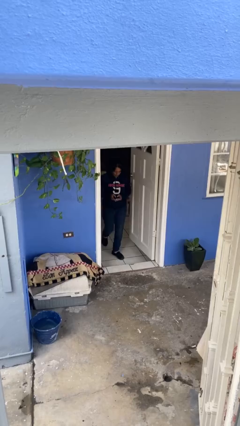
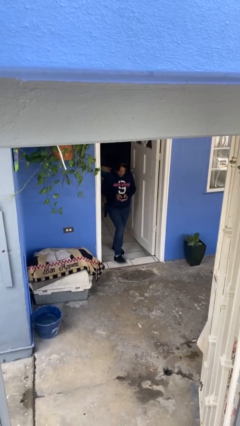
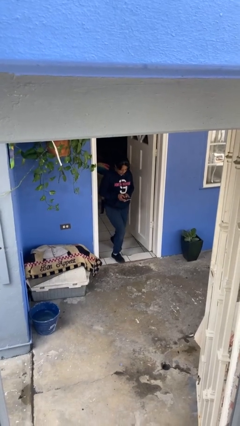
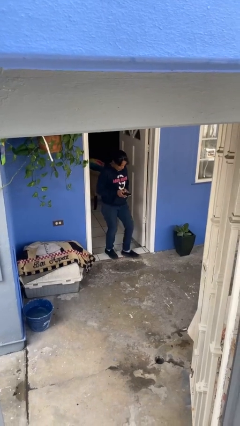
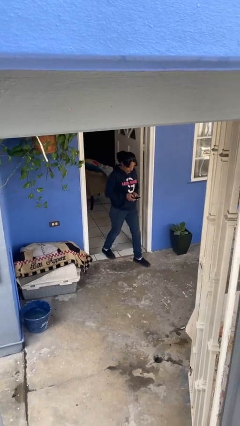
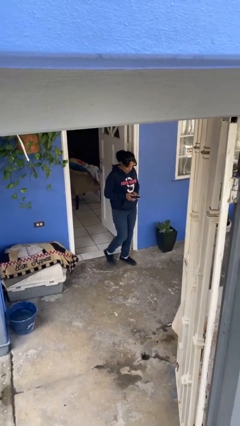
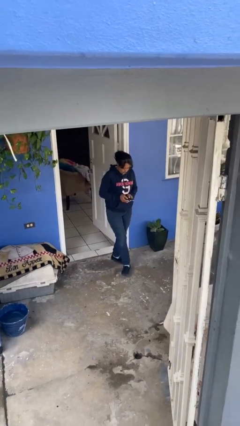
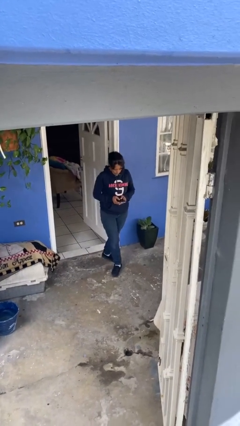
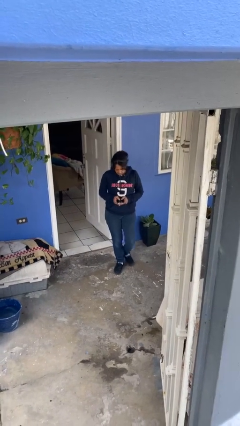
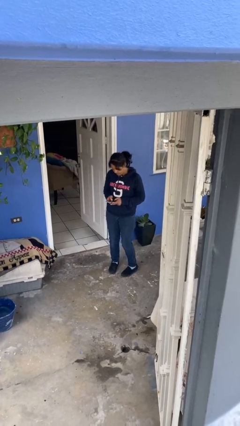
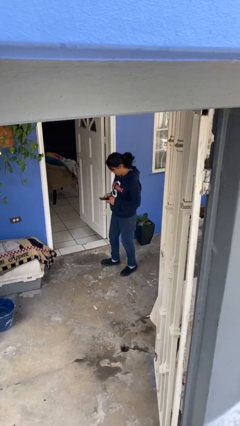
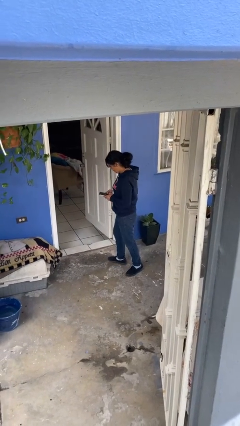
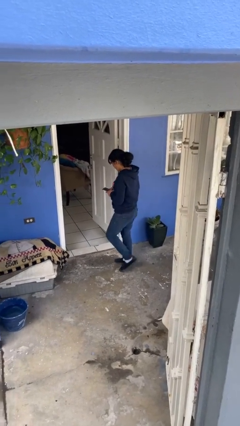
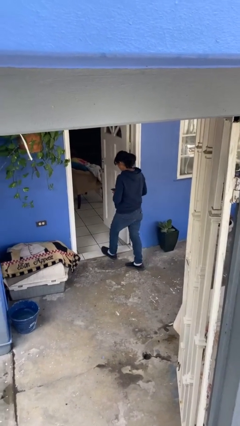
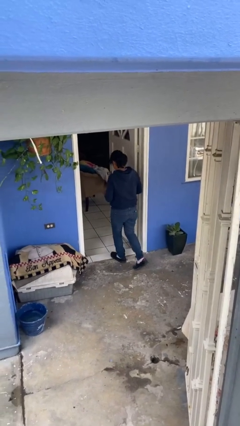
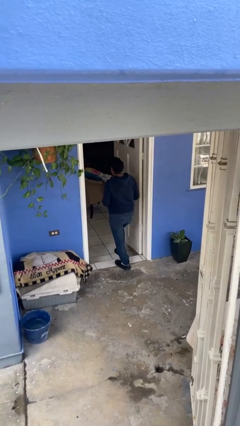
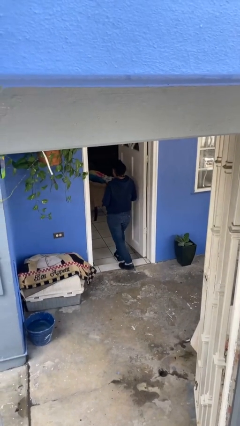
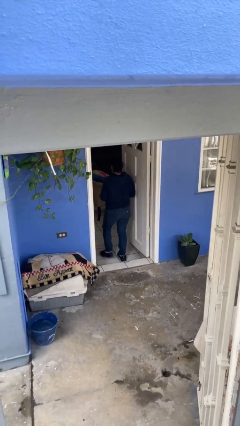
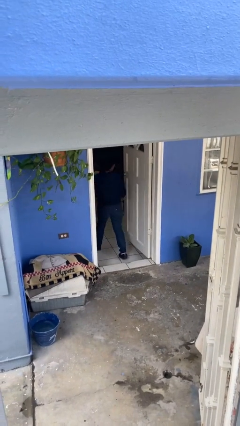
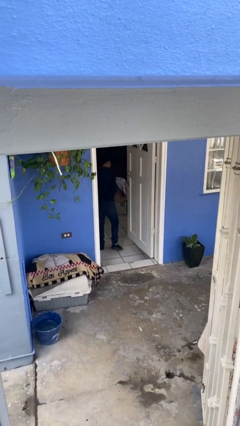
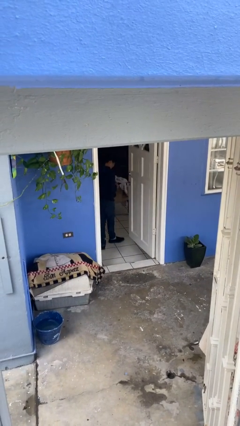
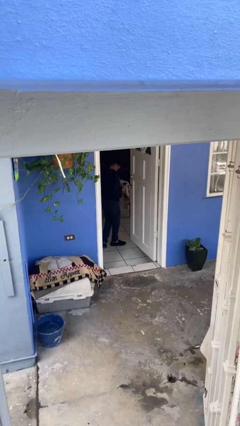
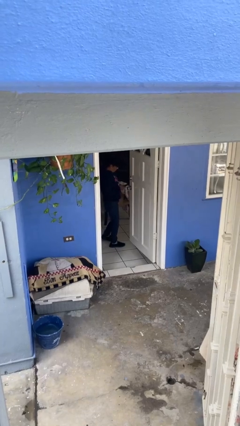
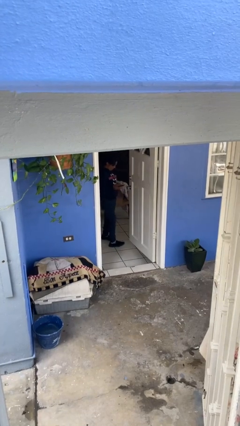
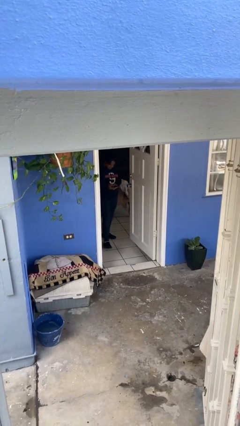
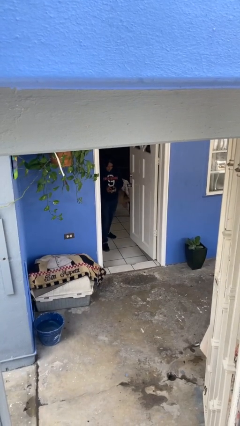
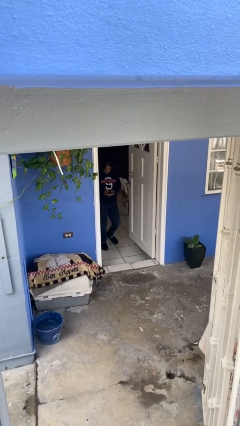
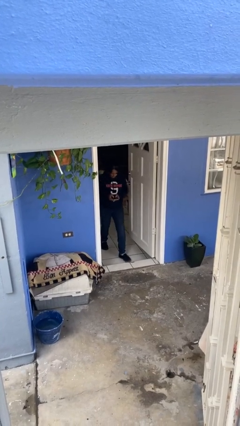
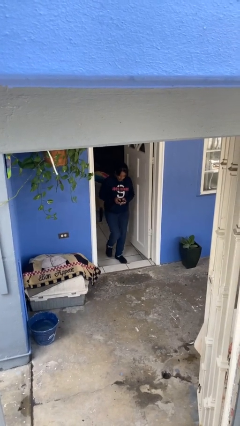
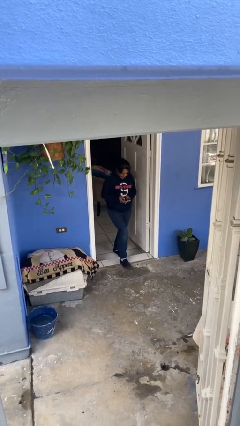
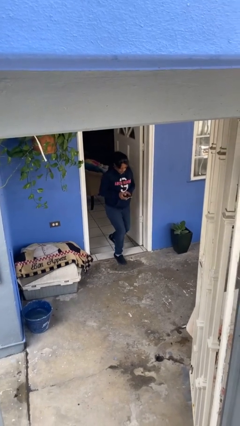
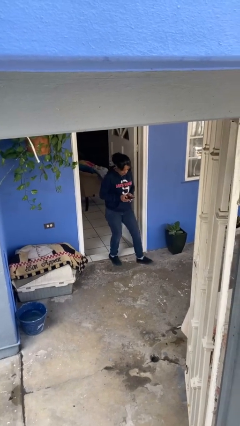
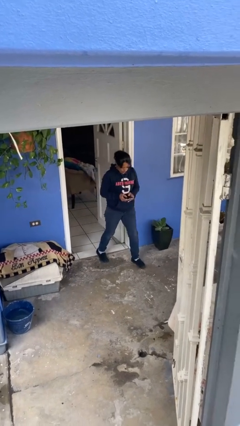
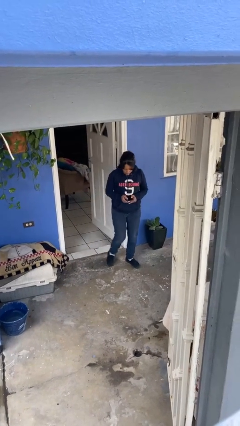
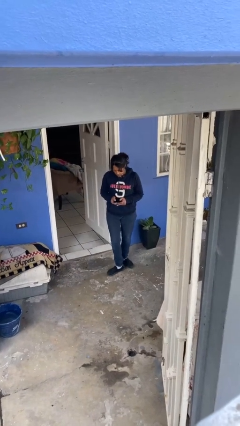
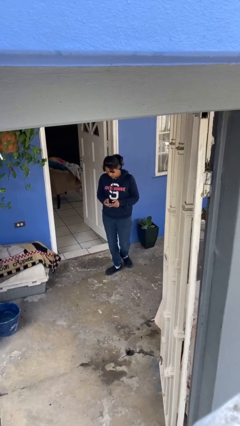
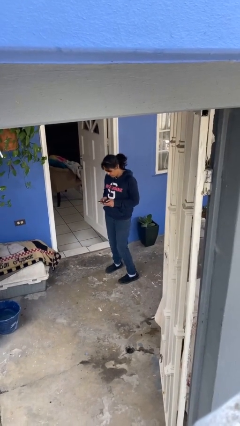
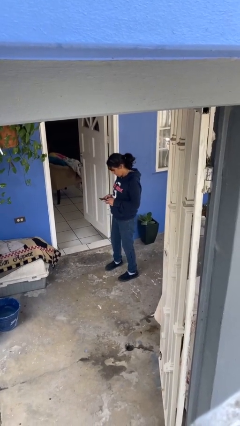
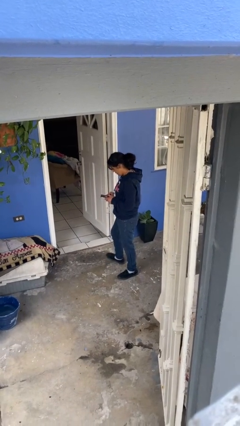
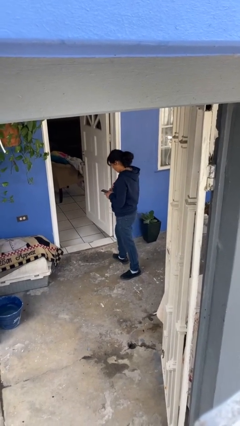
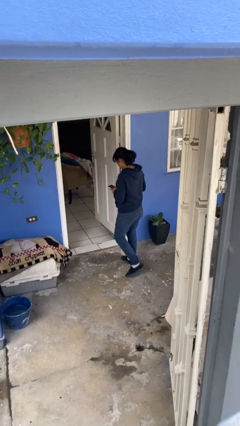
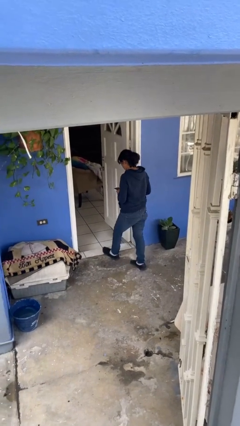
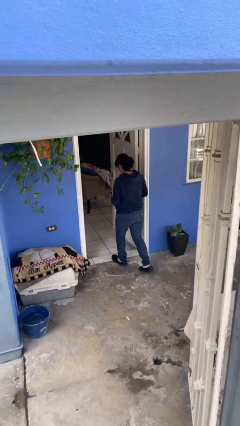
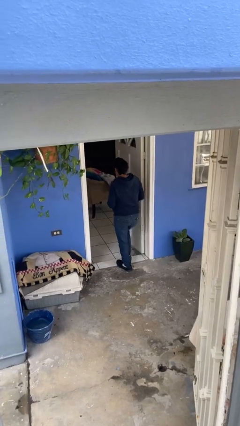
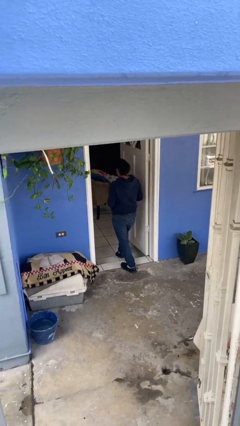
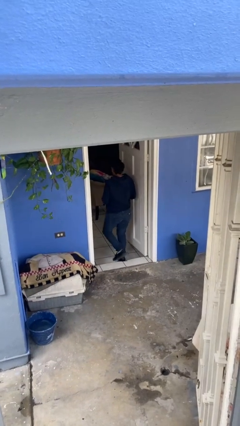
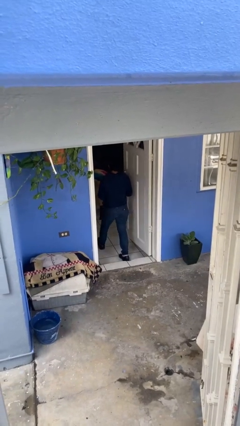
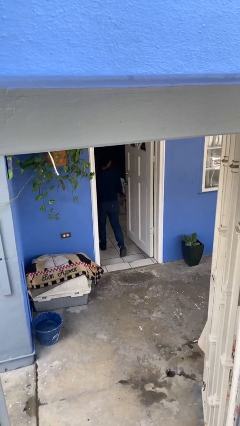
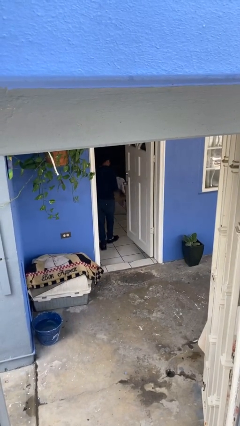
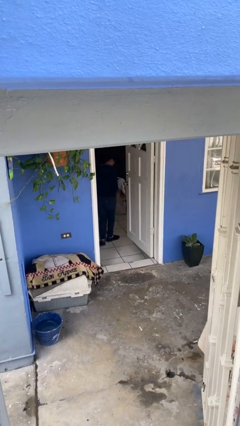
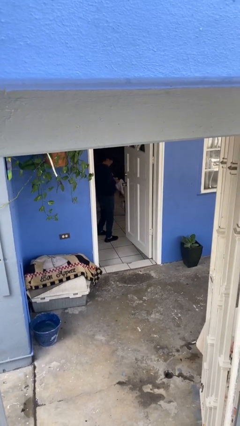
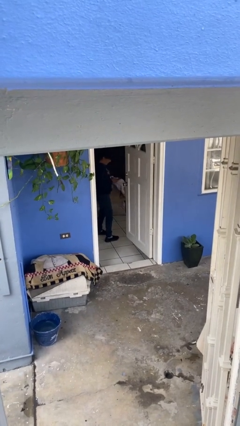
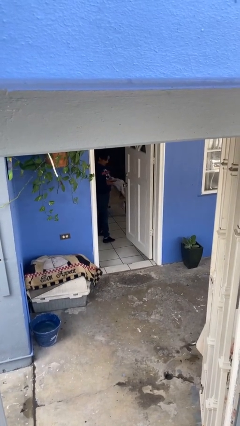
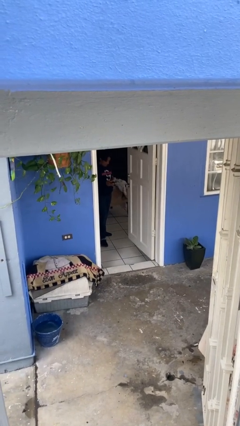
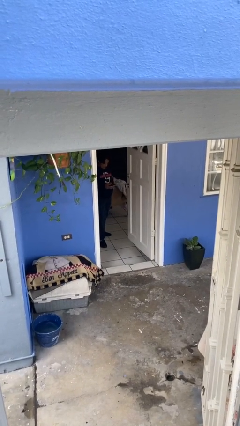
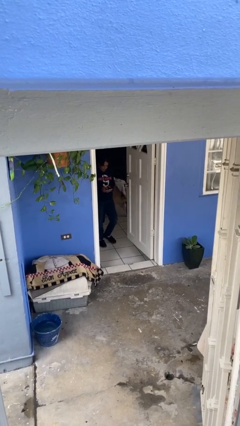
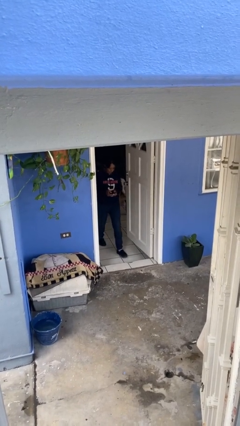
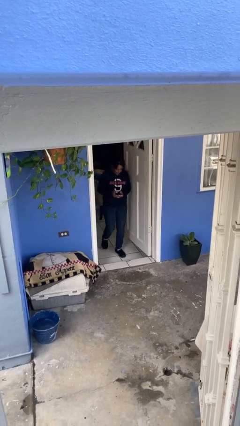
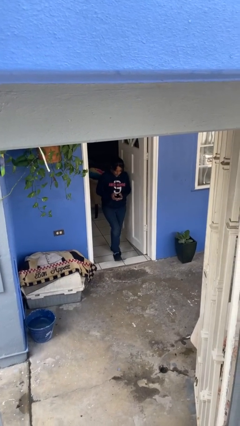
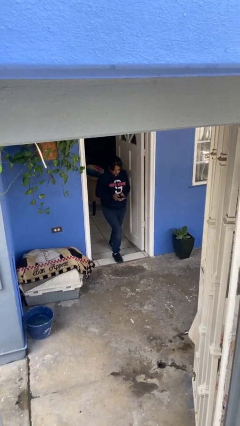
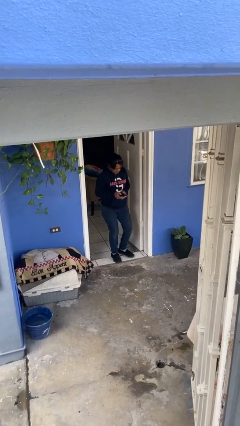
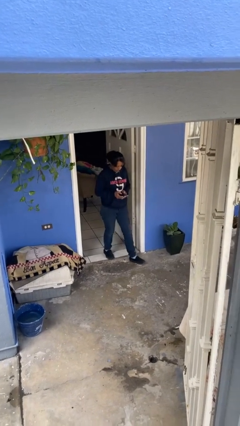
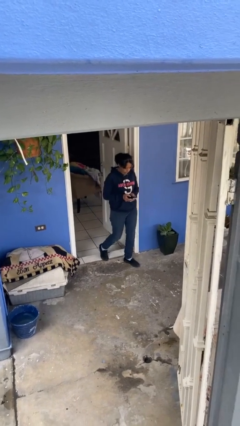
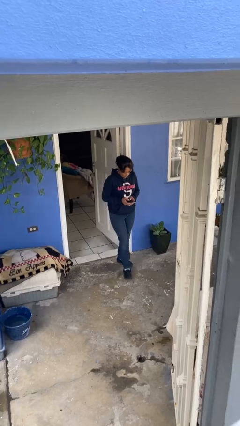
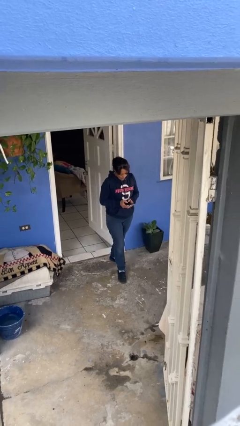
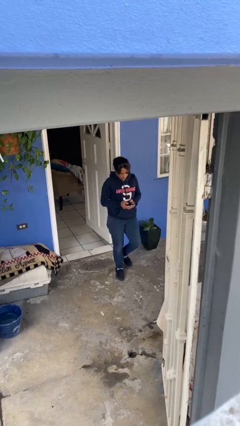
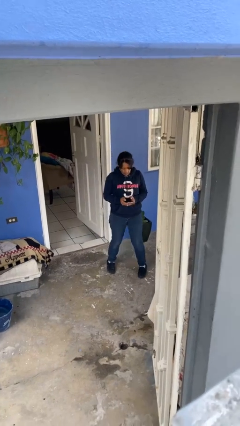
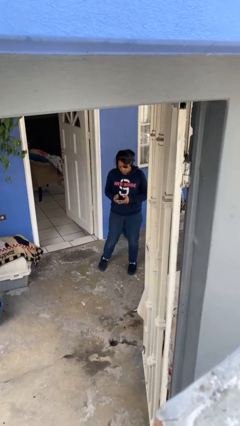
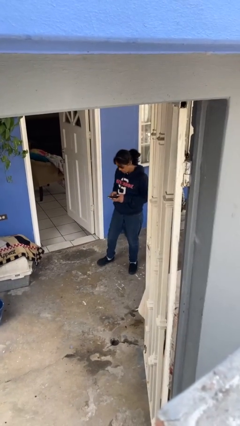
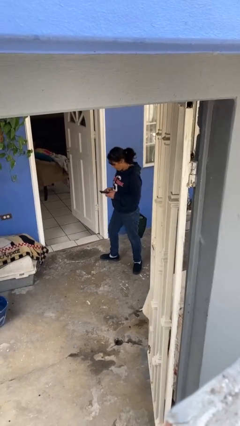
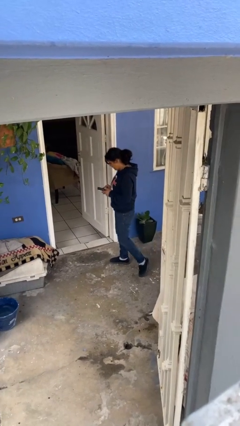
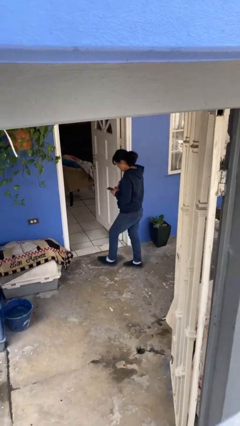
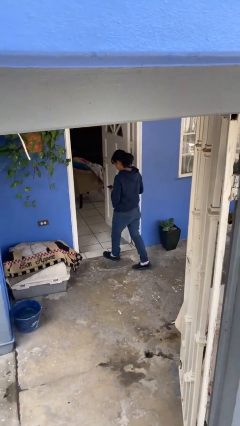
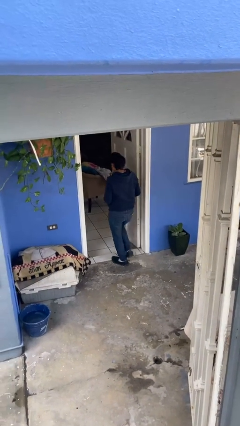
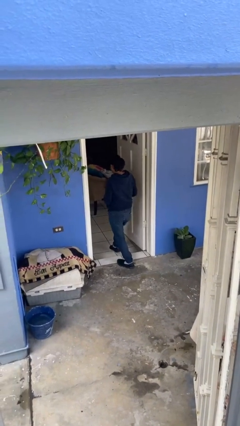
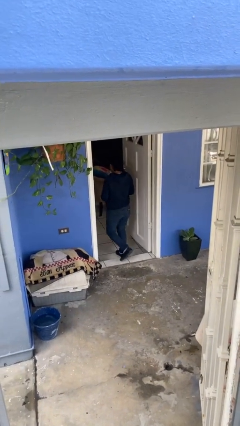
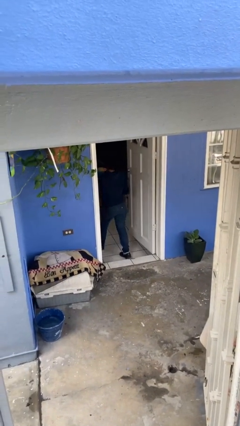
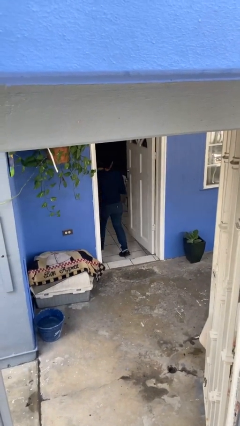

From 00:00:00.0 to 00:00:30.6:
person texts on phone

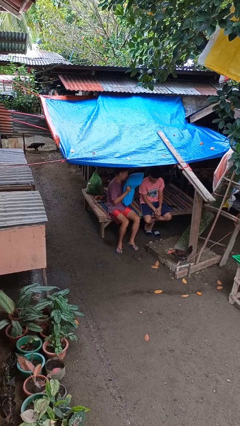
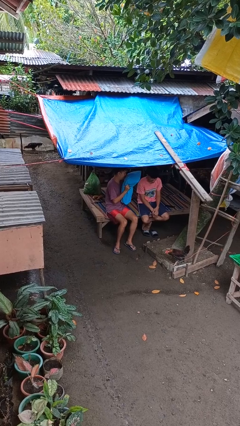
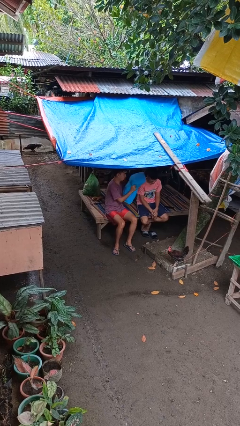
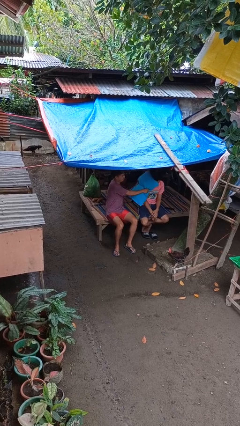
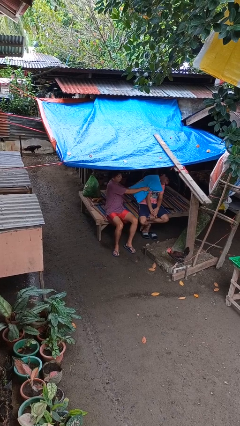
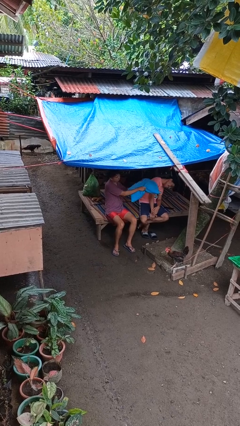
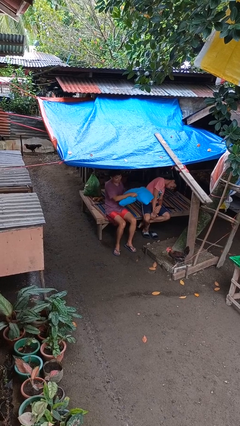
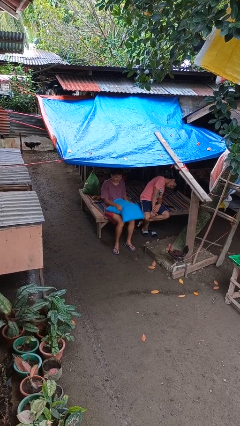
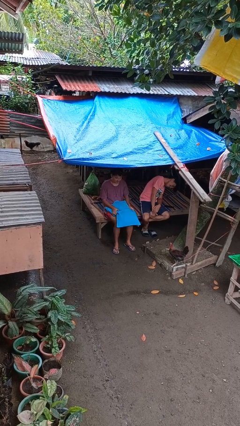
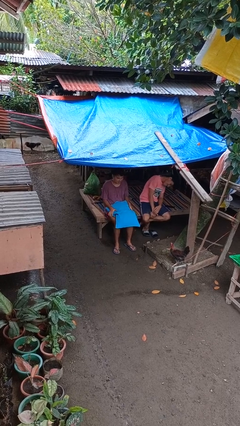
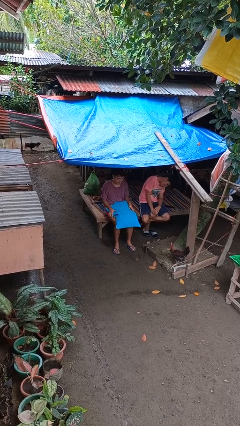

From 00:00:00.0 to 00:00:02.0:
person hits person with pillow

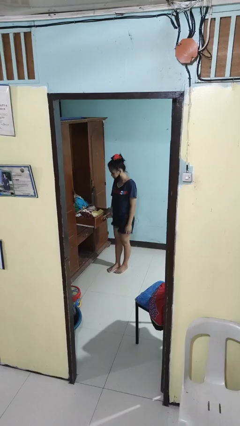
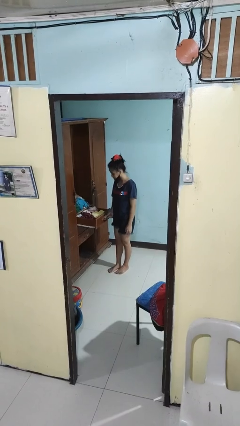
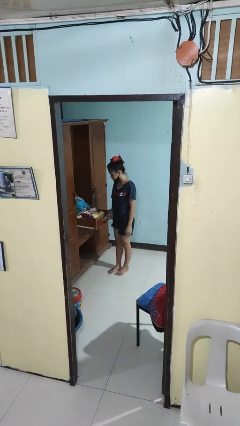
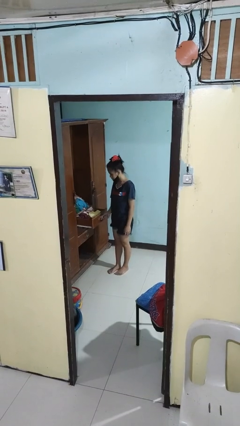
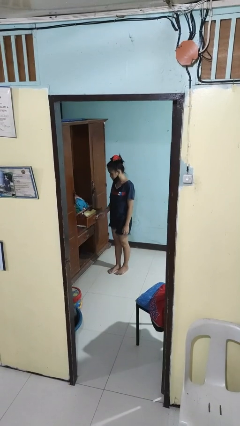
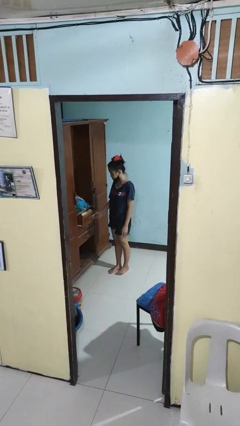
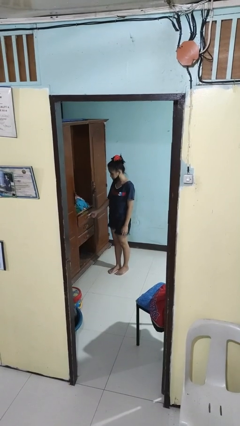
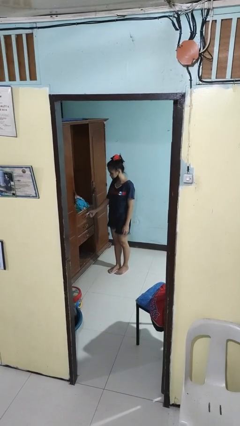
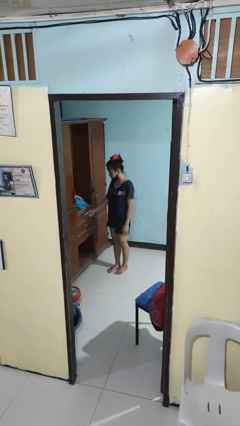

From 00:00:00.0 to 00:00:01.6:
person closes dresser drawer
